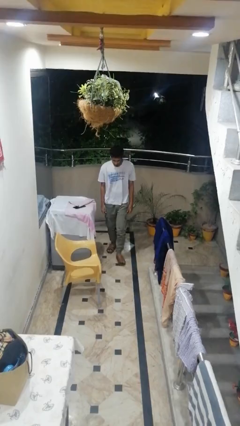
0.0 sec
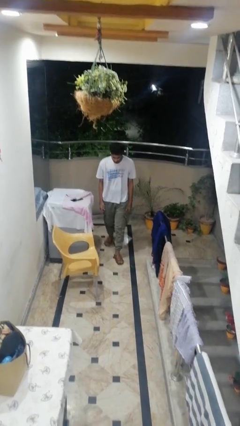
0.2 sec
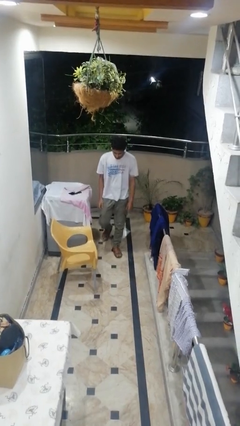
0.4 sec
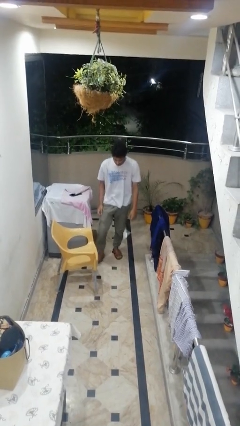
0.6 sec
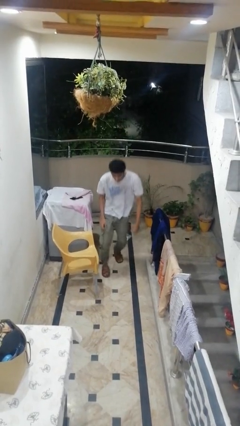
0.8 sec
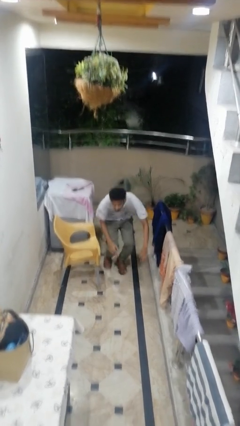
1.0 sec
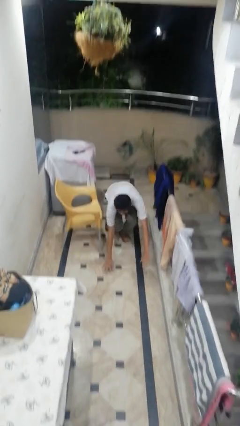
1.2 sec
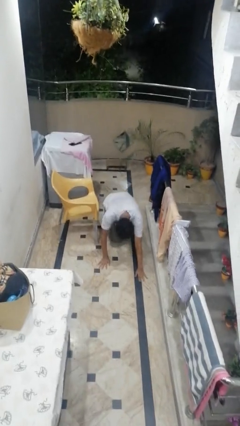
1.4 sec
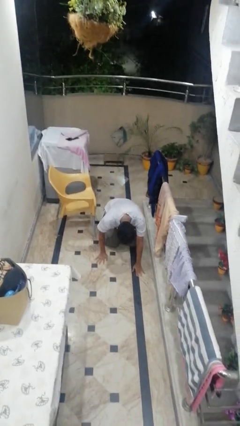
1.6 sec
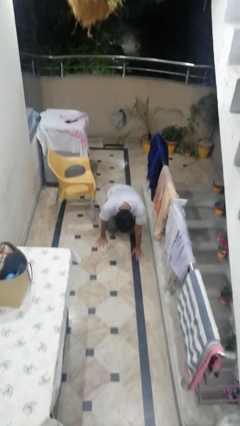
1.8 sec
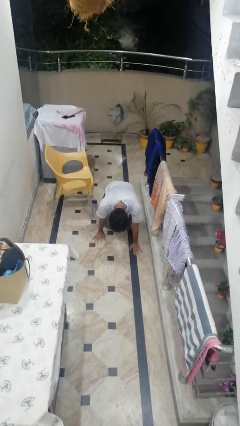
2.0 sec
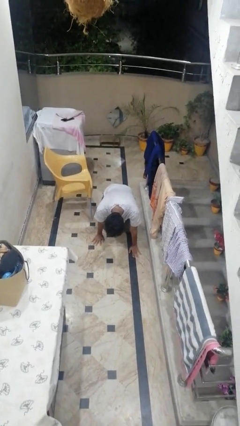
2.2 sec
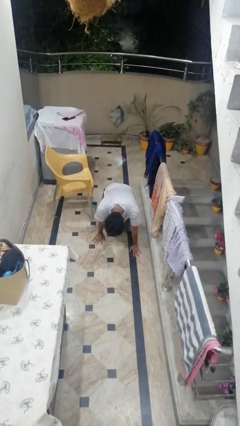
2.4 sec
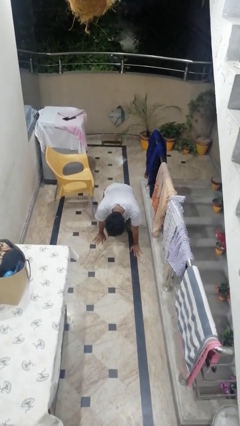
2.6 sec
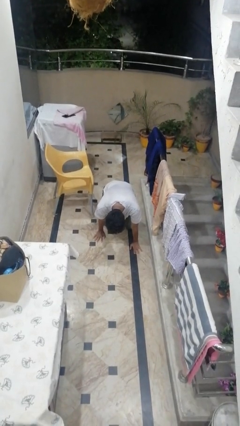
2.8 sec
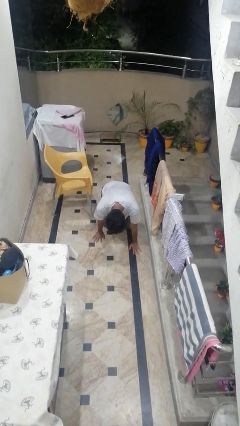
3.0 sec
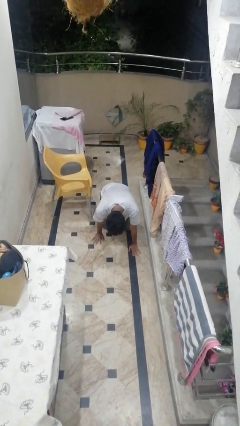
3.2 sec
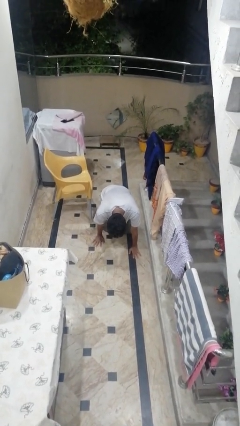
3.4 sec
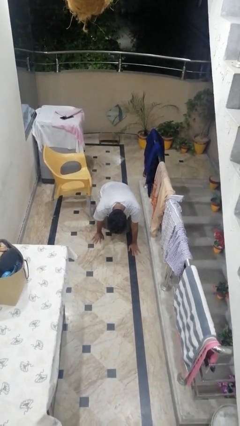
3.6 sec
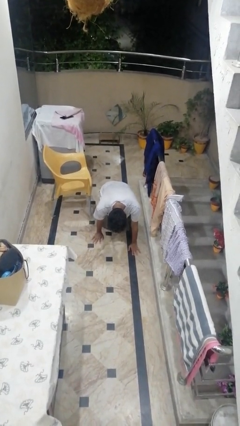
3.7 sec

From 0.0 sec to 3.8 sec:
person trips on object on floor

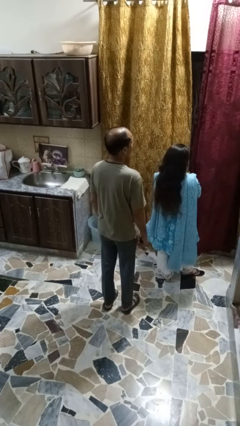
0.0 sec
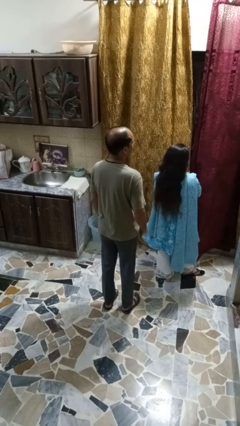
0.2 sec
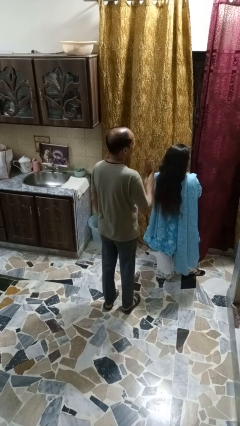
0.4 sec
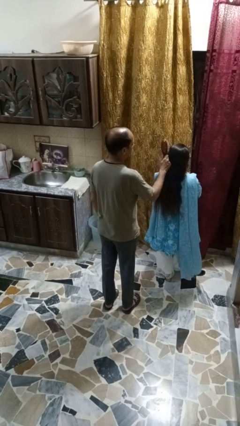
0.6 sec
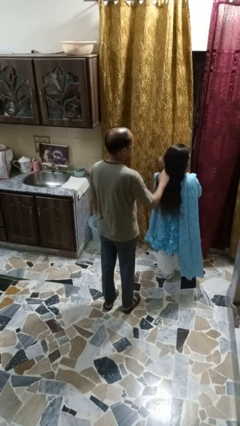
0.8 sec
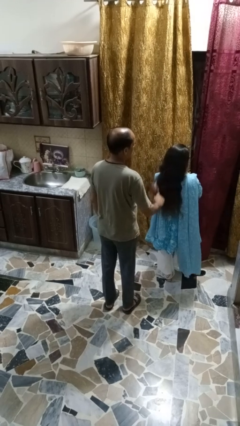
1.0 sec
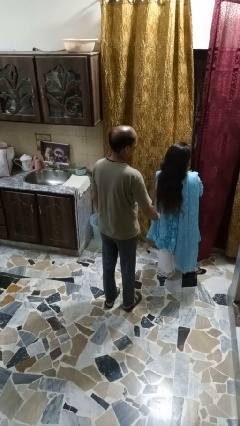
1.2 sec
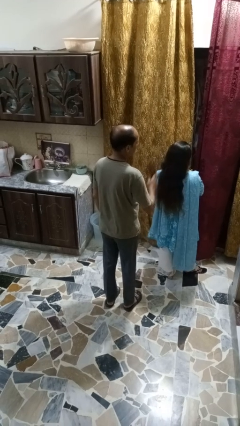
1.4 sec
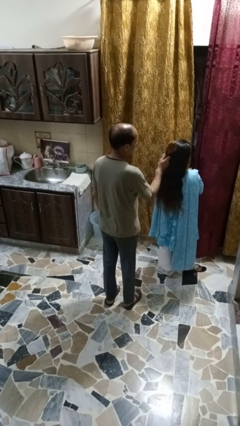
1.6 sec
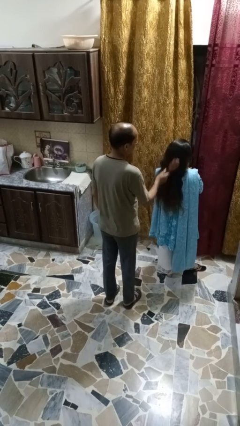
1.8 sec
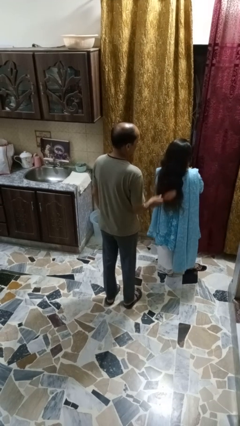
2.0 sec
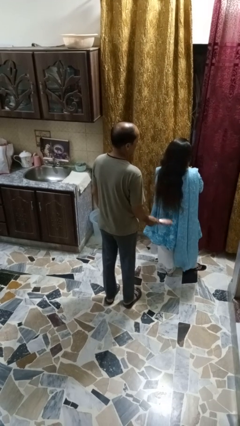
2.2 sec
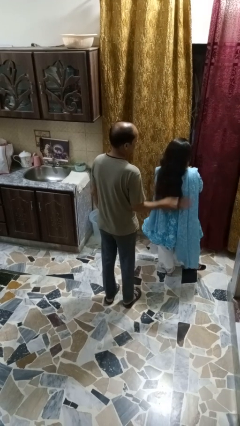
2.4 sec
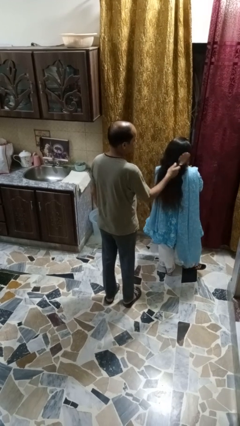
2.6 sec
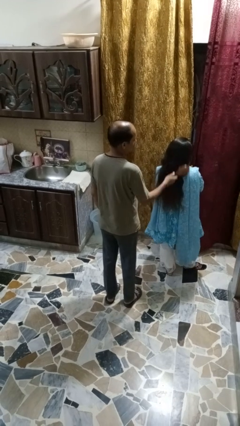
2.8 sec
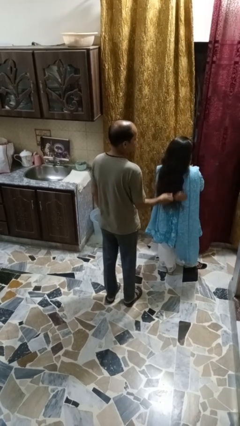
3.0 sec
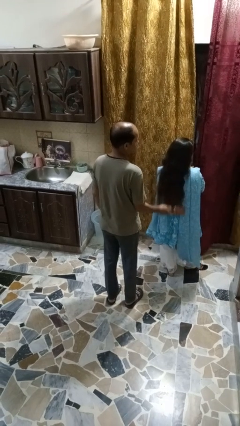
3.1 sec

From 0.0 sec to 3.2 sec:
person brushes hair of person

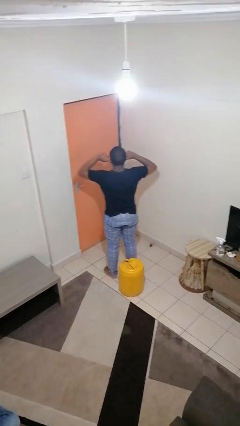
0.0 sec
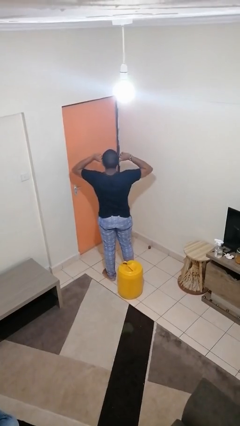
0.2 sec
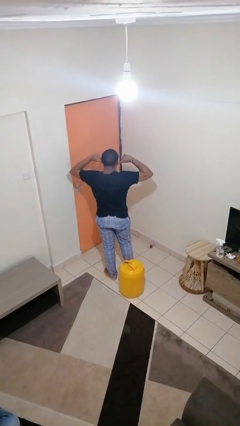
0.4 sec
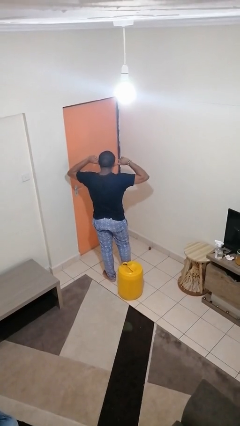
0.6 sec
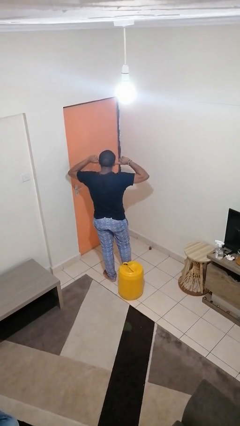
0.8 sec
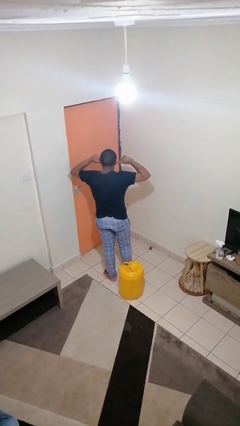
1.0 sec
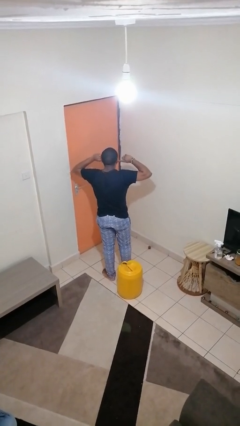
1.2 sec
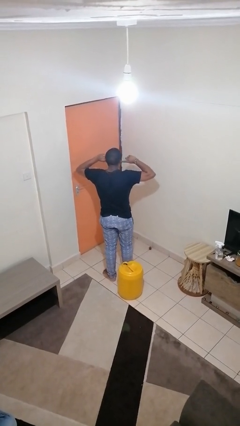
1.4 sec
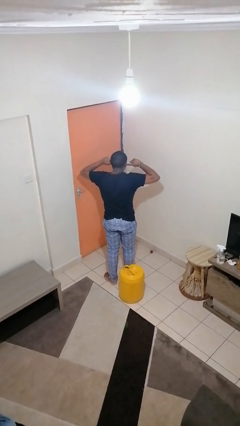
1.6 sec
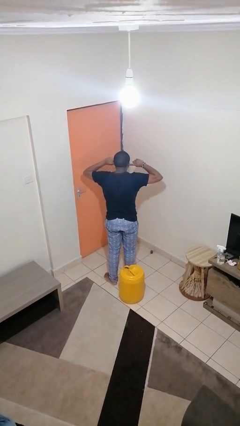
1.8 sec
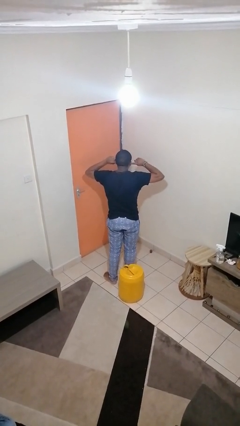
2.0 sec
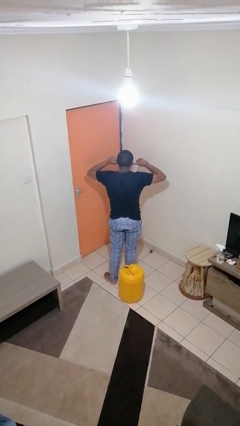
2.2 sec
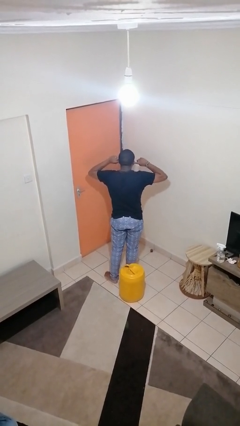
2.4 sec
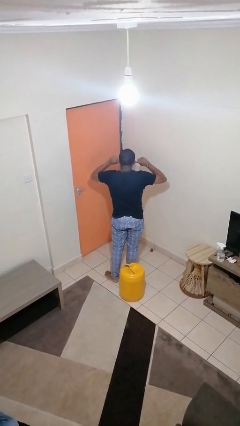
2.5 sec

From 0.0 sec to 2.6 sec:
person puts fingers in ear

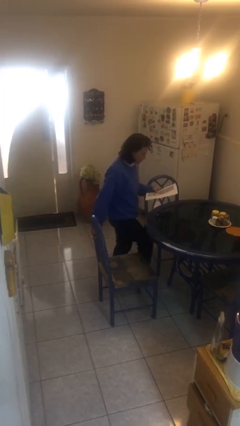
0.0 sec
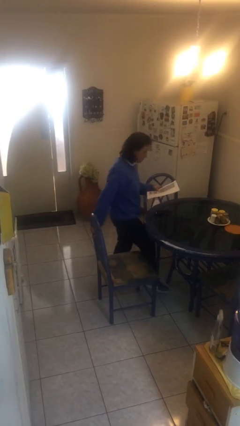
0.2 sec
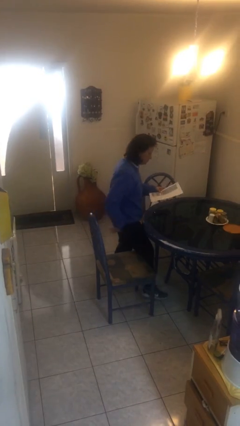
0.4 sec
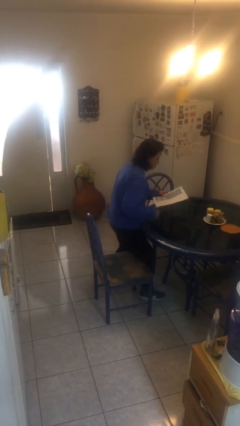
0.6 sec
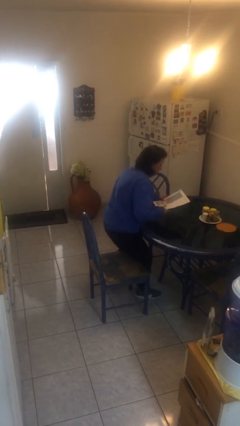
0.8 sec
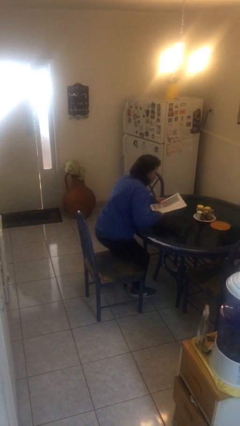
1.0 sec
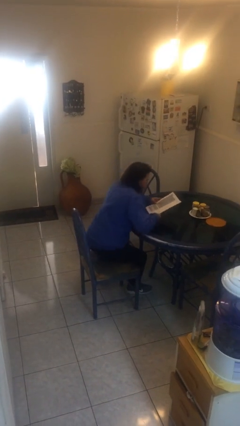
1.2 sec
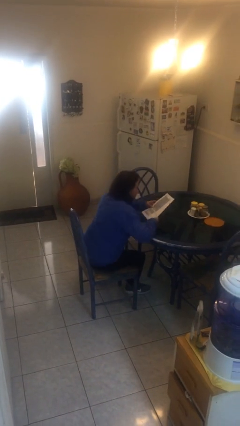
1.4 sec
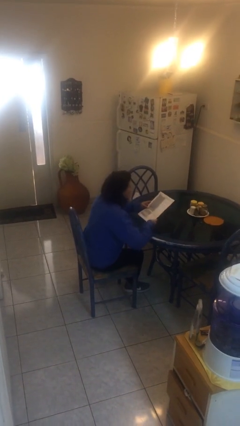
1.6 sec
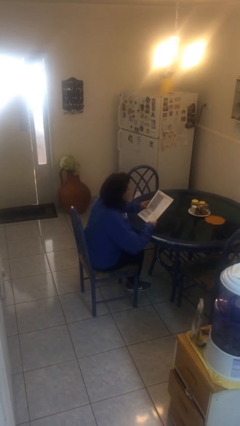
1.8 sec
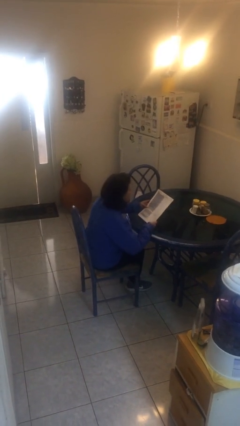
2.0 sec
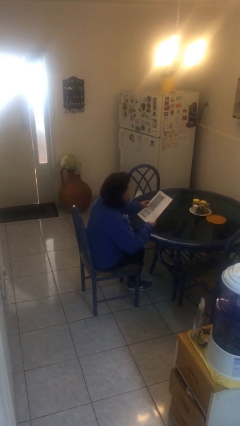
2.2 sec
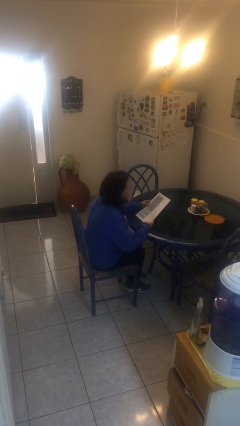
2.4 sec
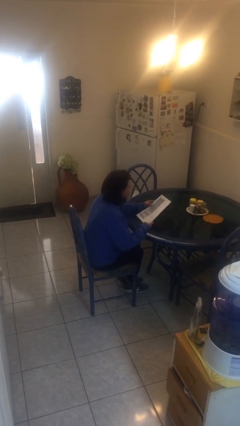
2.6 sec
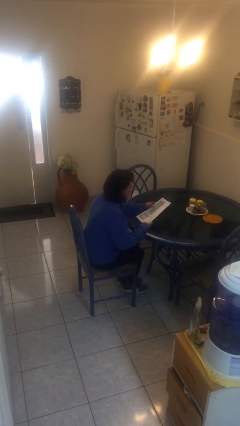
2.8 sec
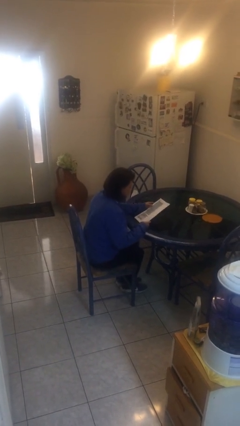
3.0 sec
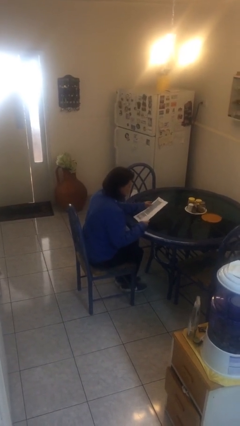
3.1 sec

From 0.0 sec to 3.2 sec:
person sits down

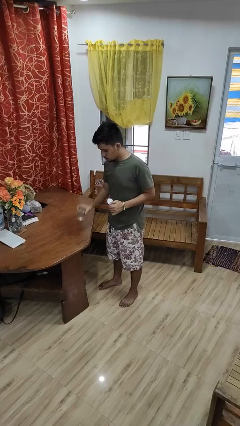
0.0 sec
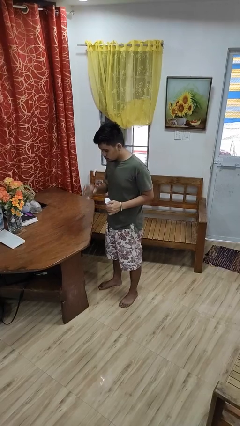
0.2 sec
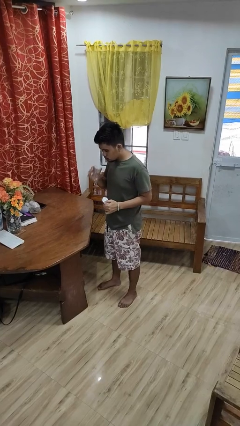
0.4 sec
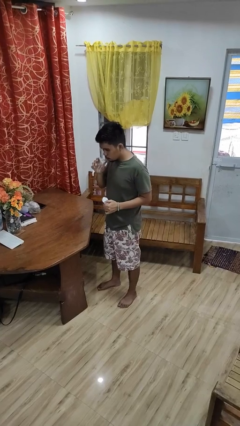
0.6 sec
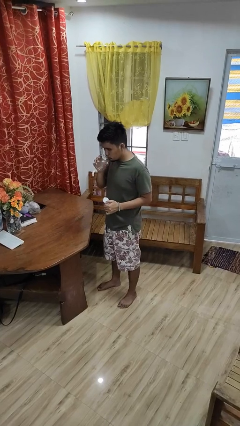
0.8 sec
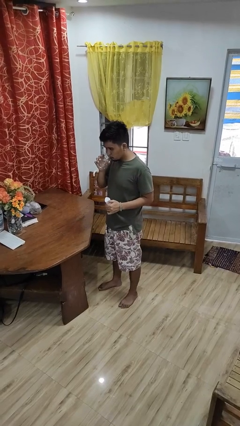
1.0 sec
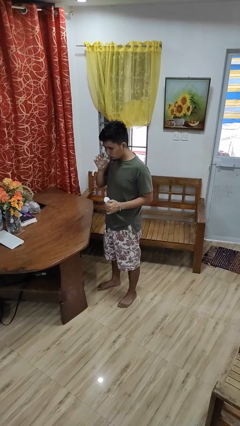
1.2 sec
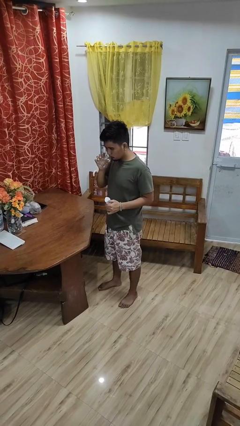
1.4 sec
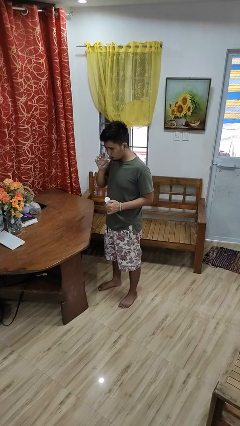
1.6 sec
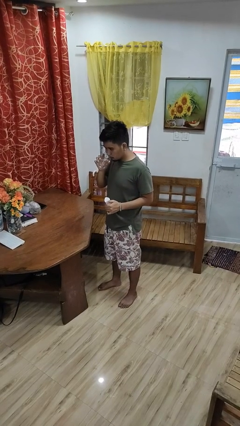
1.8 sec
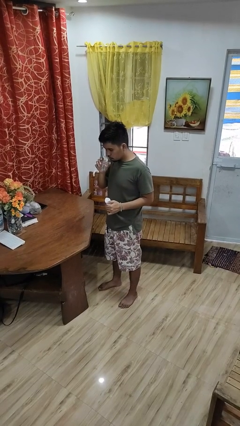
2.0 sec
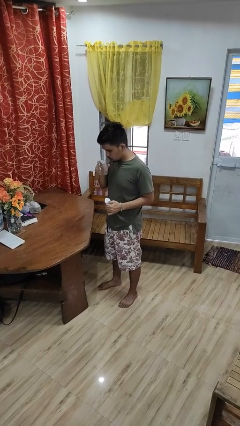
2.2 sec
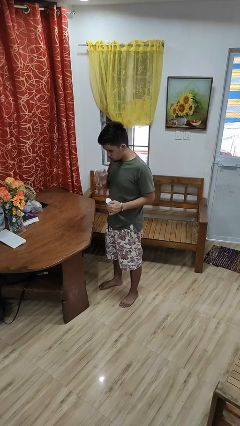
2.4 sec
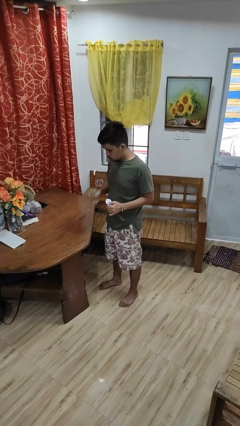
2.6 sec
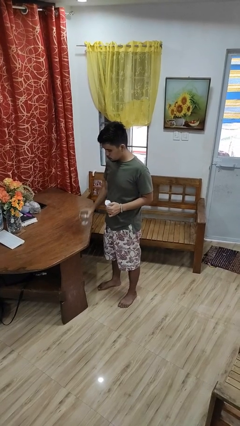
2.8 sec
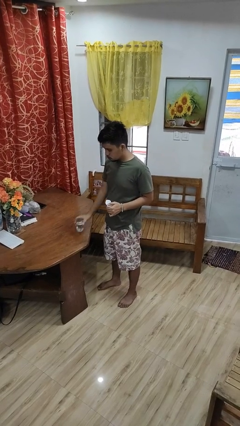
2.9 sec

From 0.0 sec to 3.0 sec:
person drinks from cup

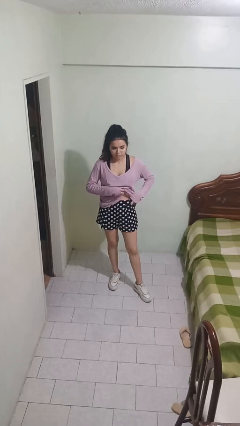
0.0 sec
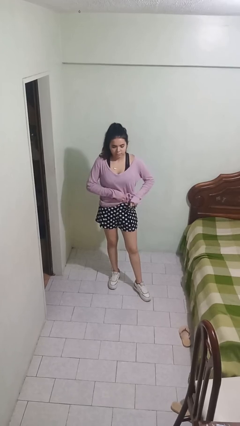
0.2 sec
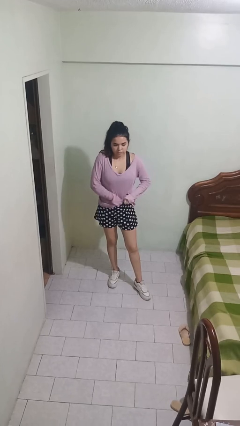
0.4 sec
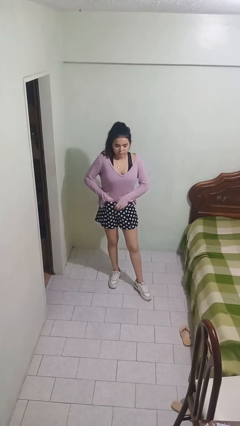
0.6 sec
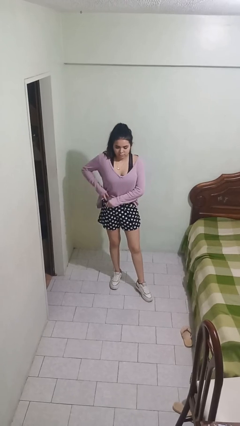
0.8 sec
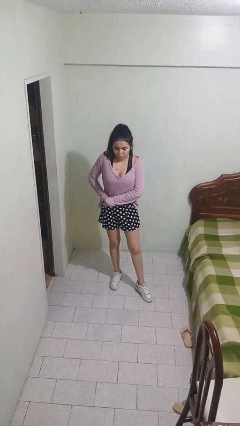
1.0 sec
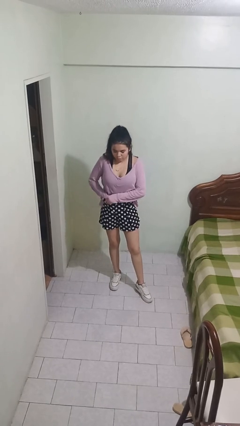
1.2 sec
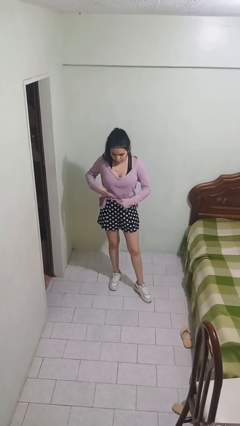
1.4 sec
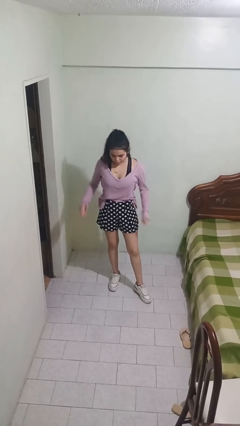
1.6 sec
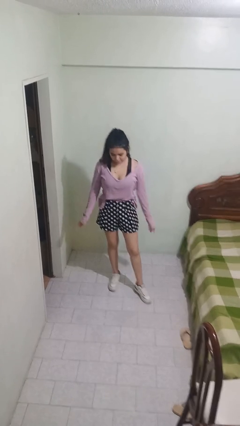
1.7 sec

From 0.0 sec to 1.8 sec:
person tucks in shirt
